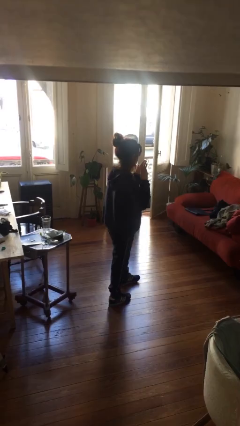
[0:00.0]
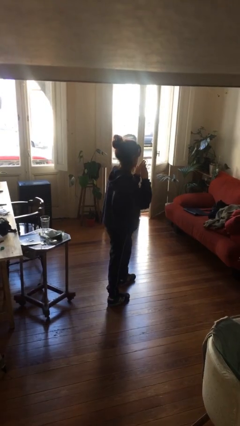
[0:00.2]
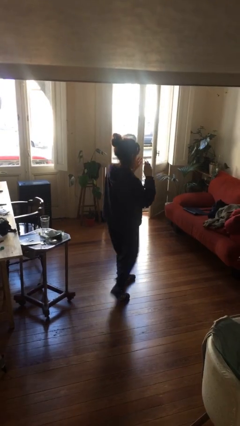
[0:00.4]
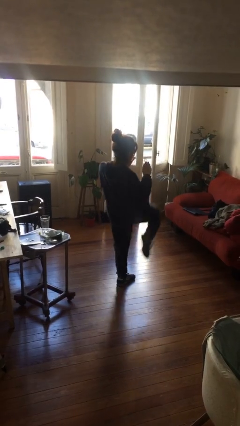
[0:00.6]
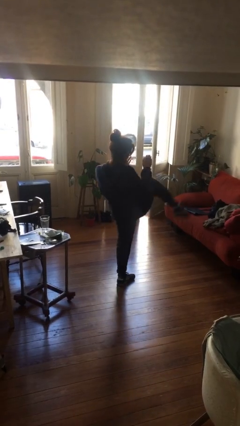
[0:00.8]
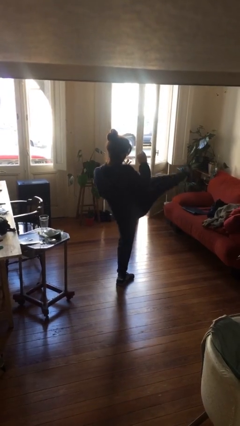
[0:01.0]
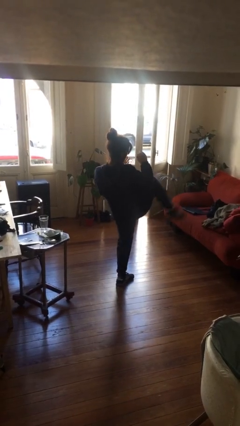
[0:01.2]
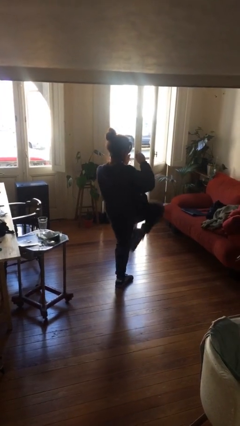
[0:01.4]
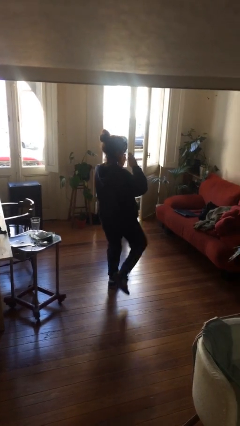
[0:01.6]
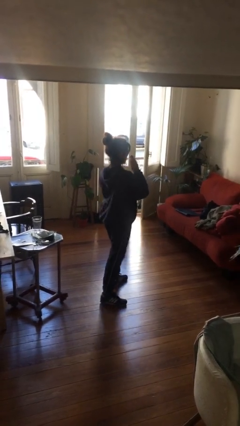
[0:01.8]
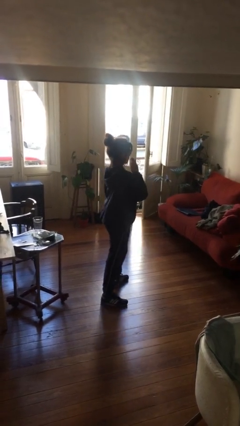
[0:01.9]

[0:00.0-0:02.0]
person karate kicks

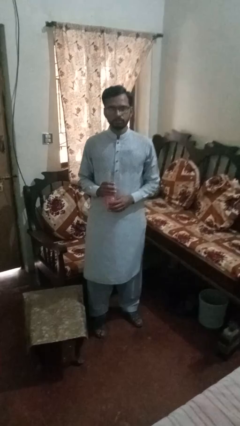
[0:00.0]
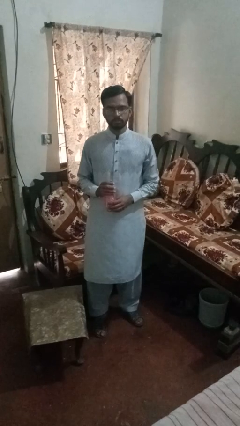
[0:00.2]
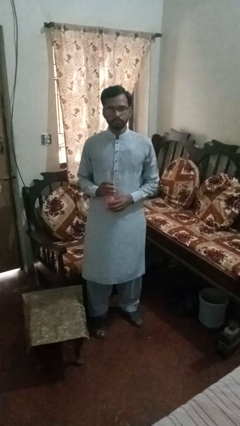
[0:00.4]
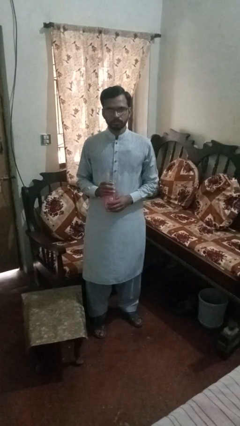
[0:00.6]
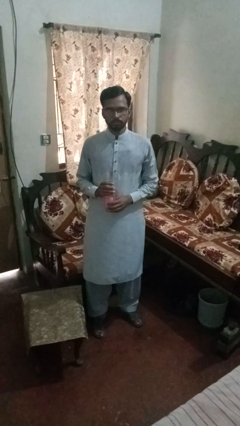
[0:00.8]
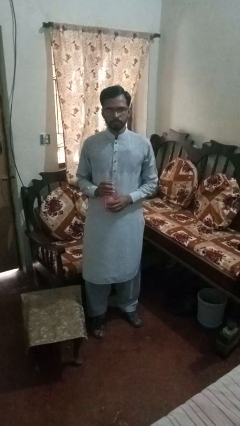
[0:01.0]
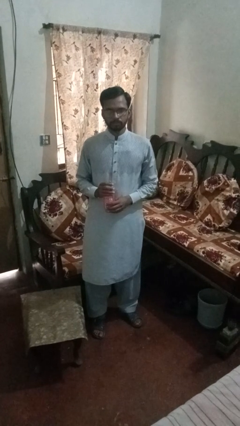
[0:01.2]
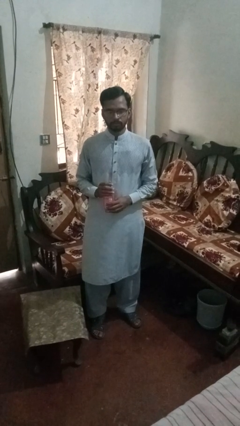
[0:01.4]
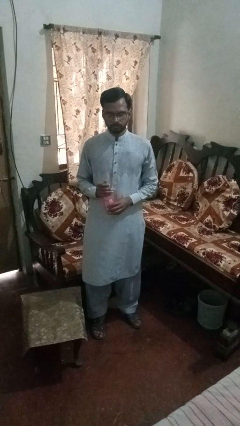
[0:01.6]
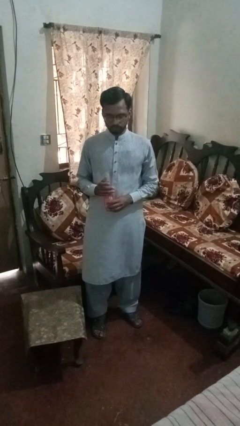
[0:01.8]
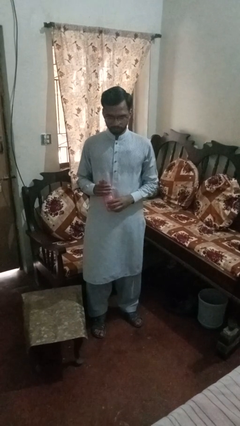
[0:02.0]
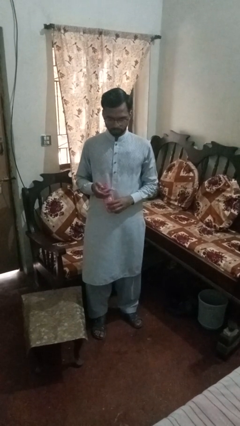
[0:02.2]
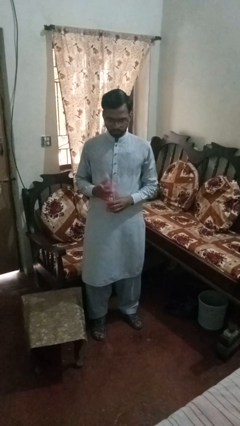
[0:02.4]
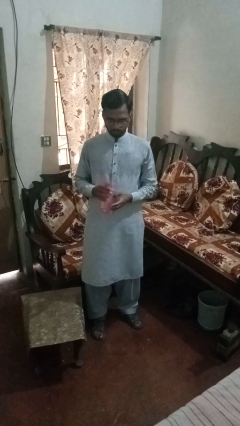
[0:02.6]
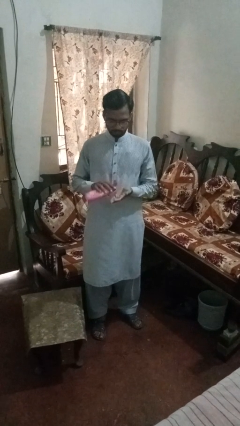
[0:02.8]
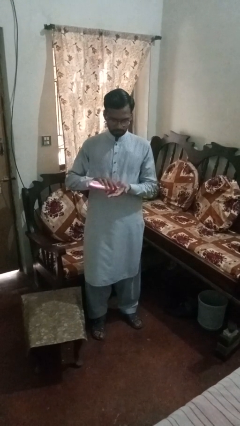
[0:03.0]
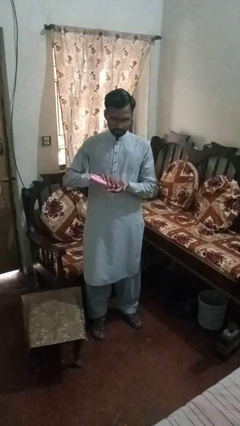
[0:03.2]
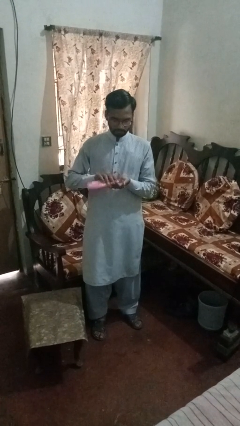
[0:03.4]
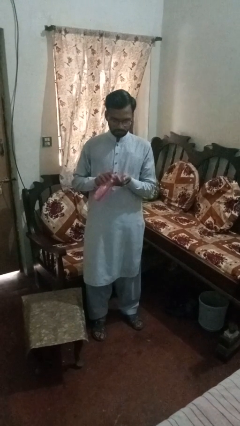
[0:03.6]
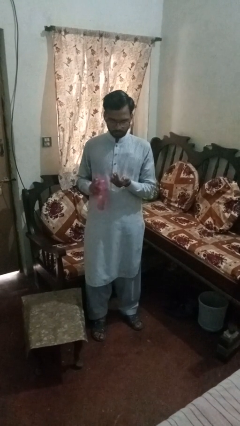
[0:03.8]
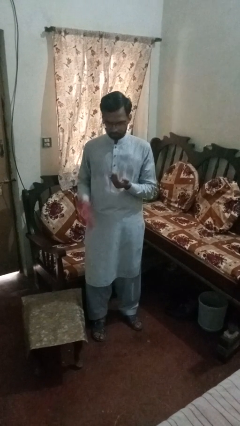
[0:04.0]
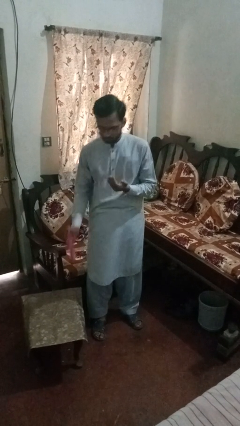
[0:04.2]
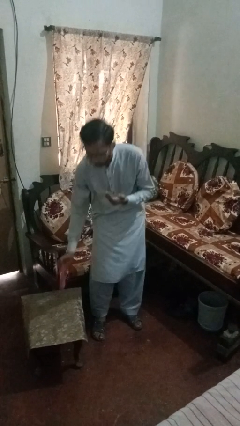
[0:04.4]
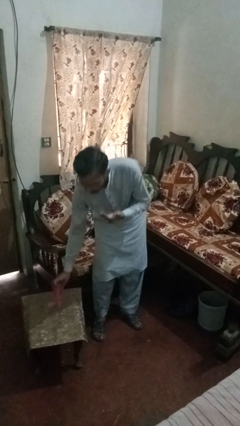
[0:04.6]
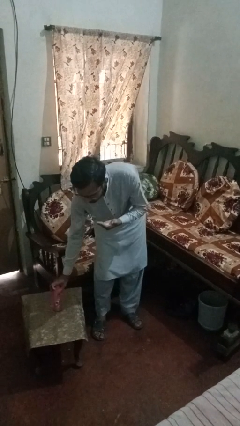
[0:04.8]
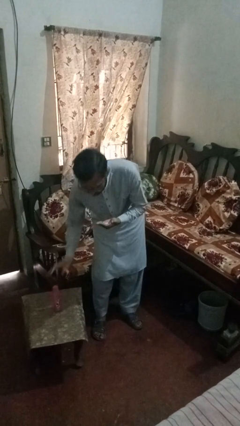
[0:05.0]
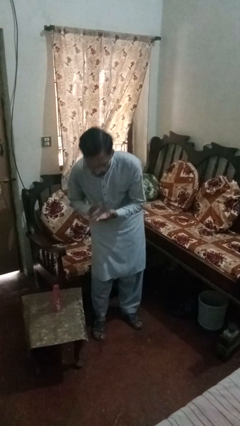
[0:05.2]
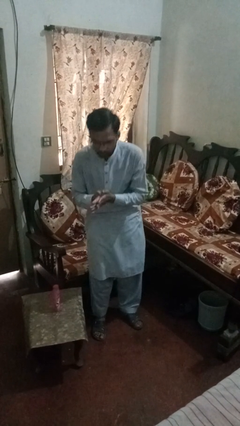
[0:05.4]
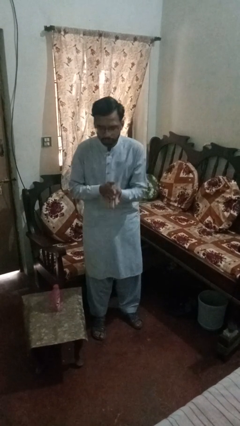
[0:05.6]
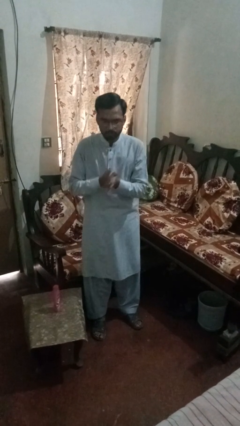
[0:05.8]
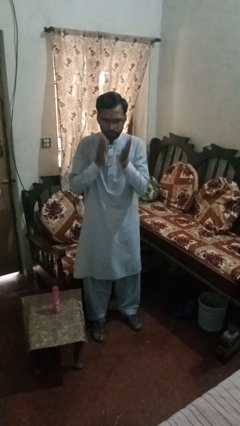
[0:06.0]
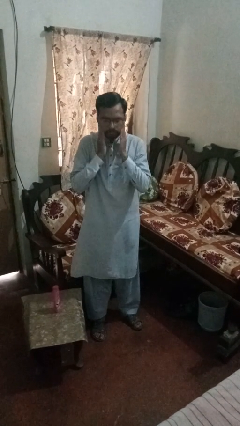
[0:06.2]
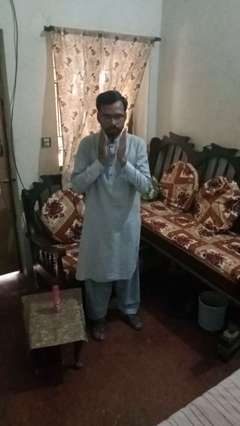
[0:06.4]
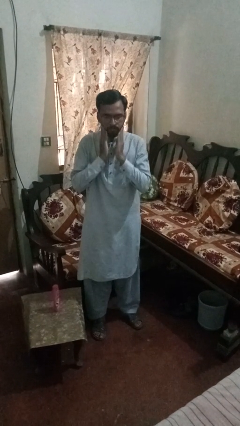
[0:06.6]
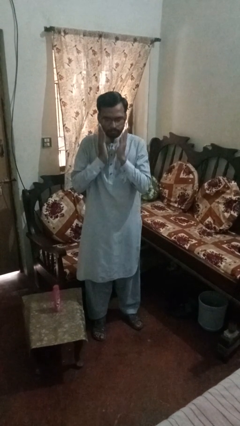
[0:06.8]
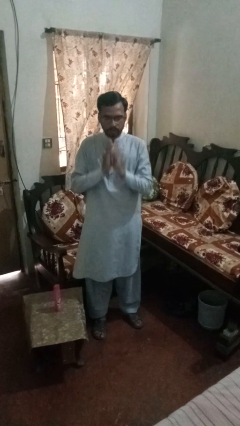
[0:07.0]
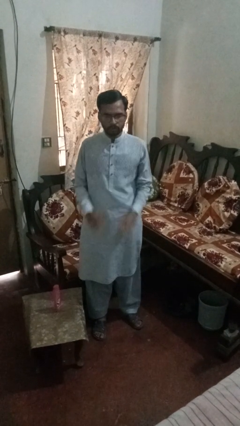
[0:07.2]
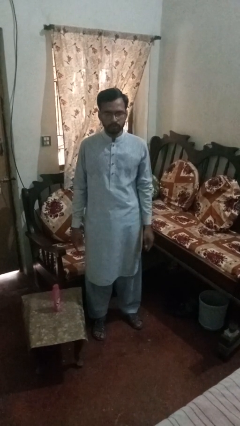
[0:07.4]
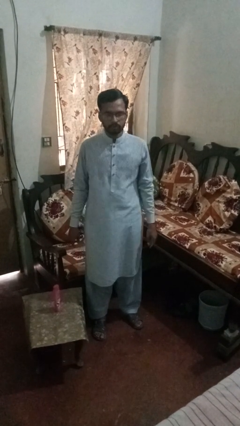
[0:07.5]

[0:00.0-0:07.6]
person applies sunscreen

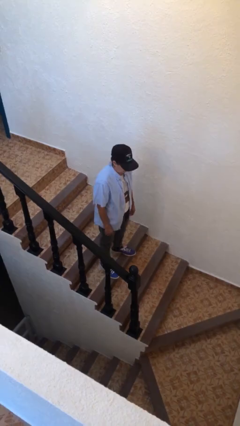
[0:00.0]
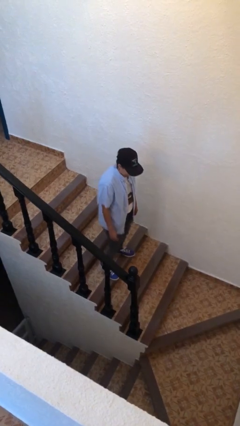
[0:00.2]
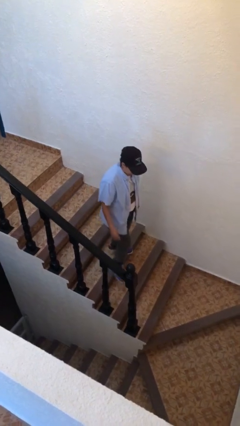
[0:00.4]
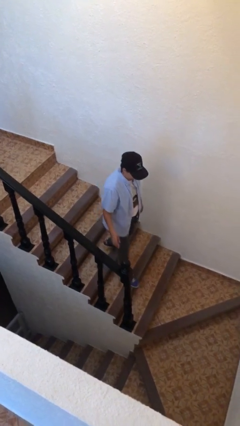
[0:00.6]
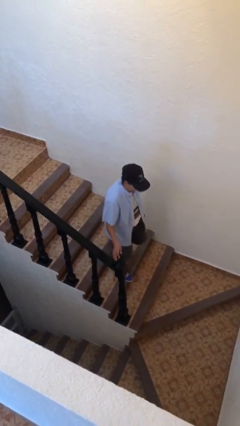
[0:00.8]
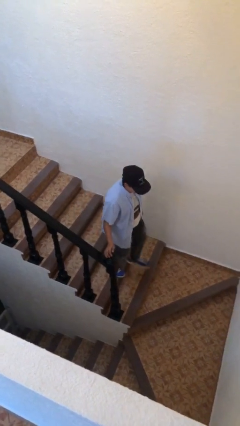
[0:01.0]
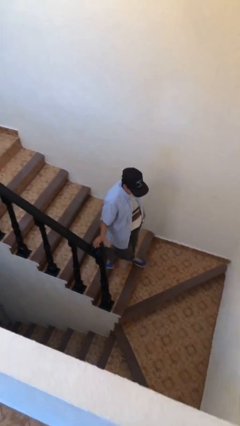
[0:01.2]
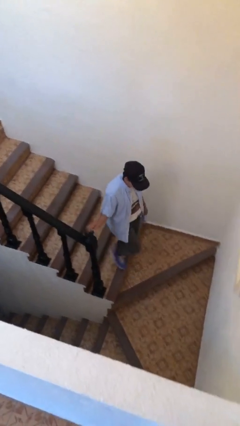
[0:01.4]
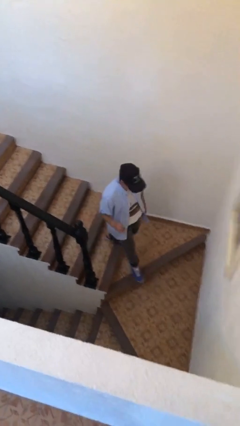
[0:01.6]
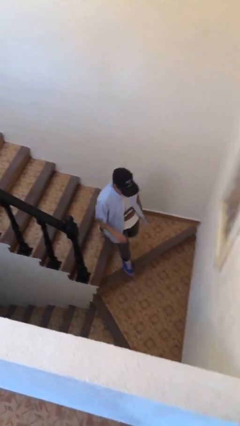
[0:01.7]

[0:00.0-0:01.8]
person climbs down stairs

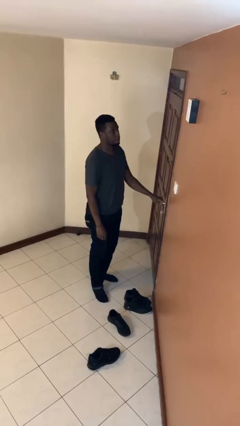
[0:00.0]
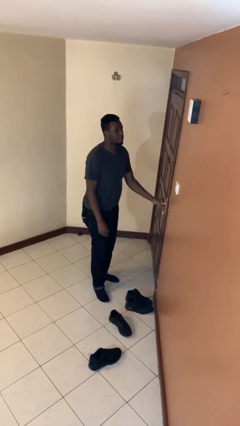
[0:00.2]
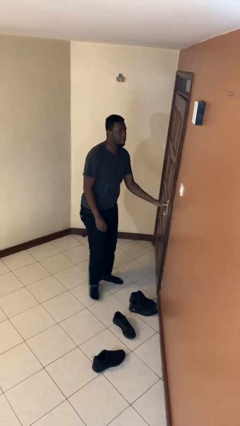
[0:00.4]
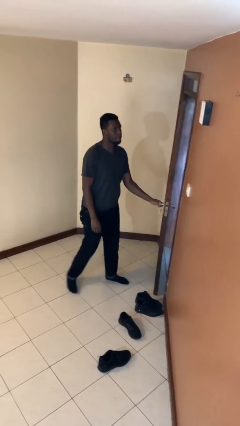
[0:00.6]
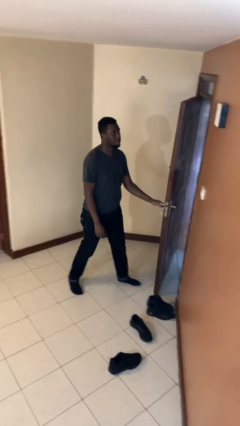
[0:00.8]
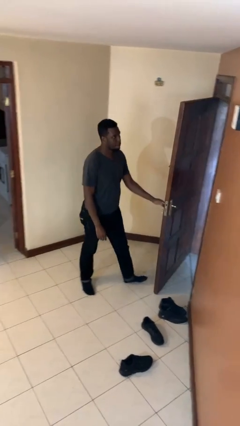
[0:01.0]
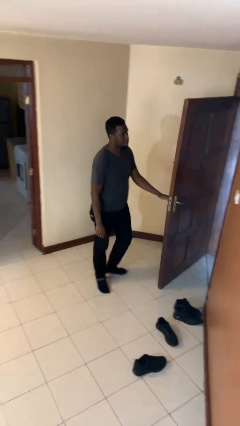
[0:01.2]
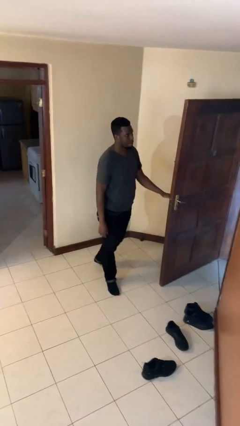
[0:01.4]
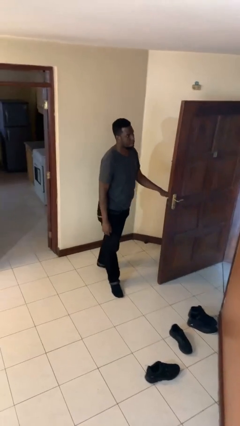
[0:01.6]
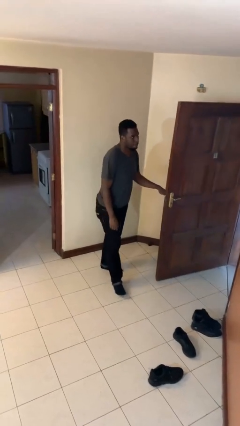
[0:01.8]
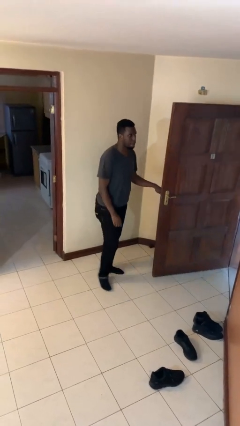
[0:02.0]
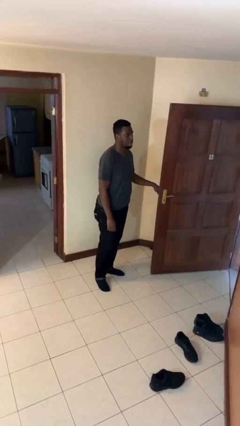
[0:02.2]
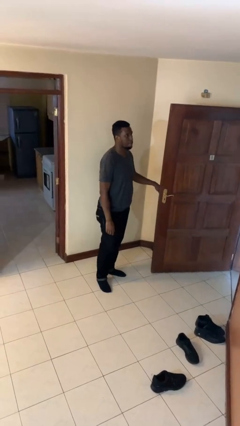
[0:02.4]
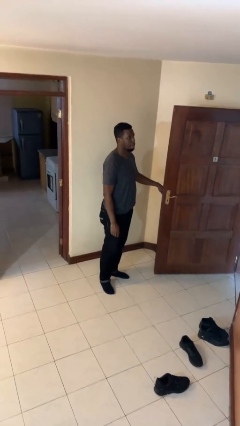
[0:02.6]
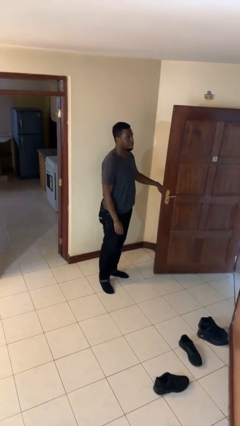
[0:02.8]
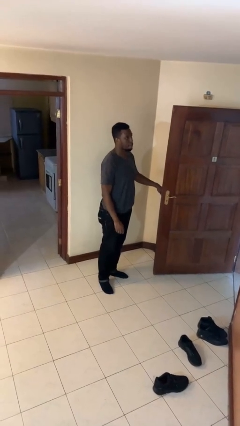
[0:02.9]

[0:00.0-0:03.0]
person opens facility door

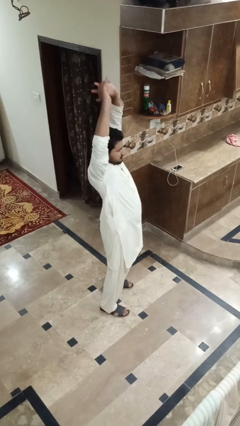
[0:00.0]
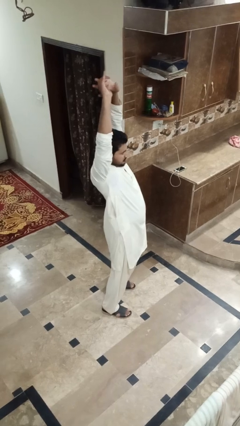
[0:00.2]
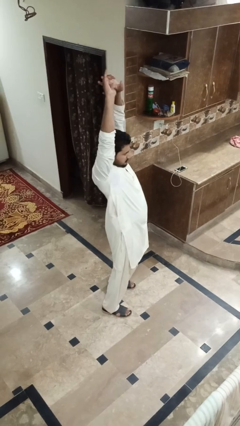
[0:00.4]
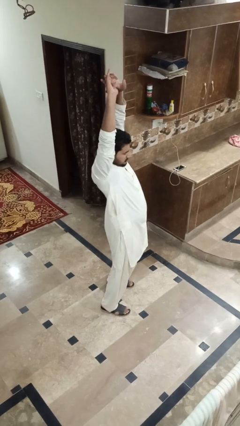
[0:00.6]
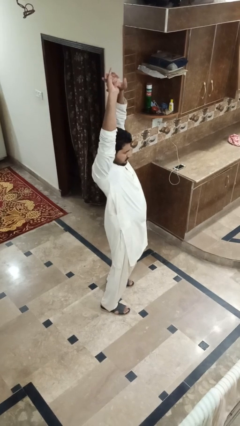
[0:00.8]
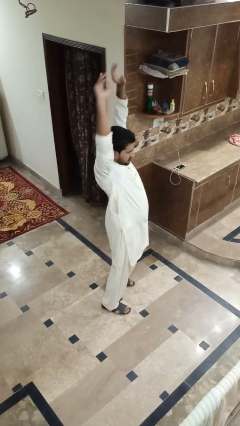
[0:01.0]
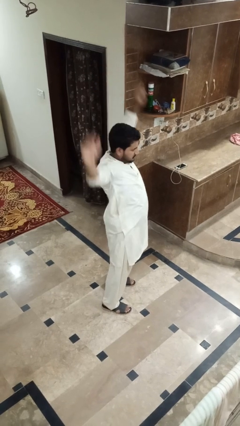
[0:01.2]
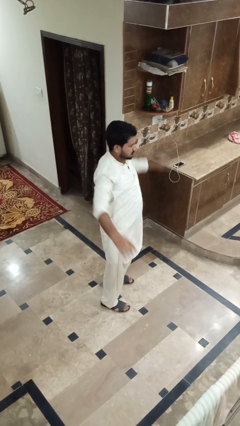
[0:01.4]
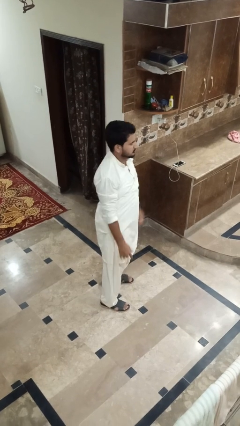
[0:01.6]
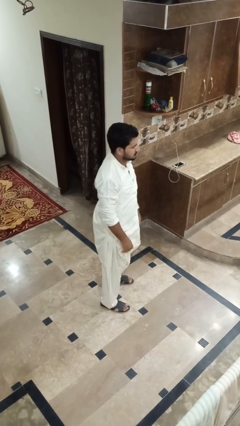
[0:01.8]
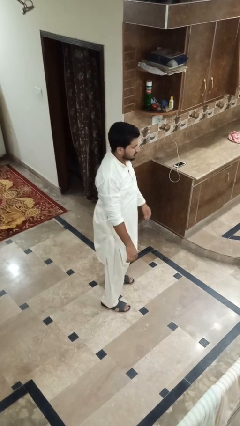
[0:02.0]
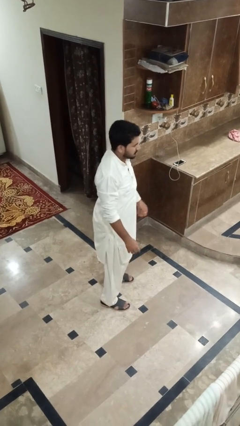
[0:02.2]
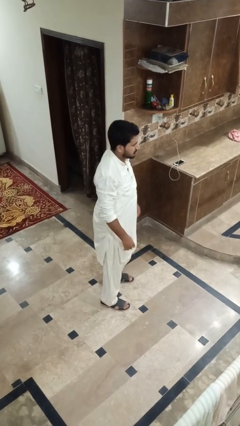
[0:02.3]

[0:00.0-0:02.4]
person stretches arms over head

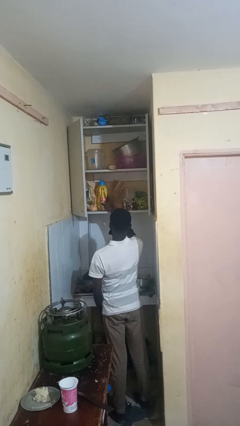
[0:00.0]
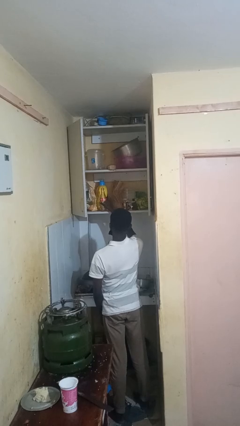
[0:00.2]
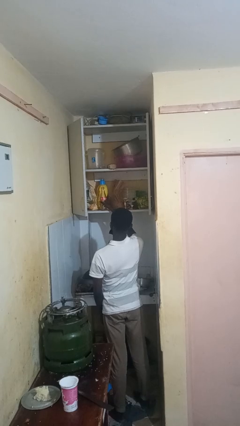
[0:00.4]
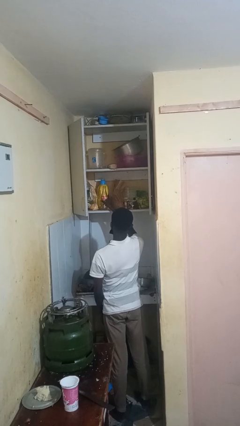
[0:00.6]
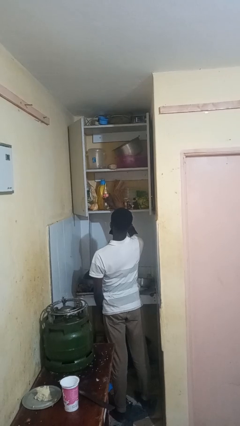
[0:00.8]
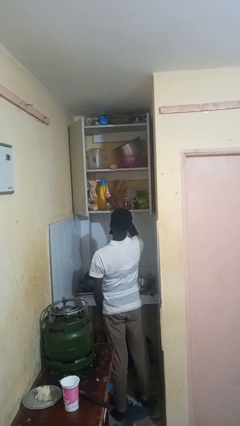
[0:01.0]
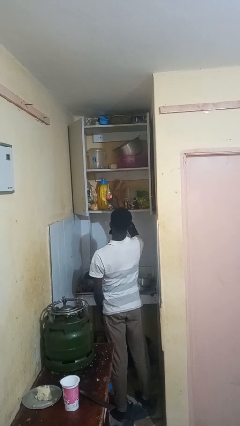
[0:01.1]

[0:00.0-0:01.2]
person picks up object from cabinet
